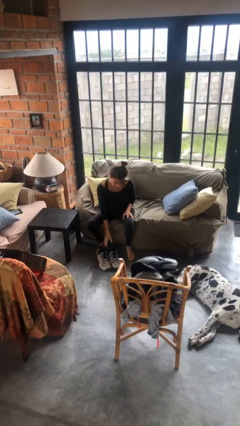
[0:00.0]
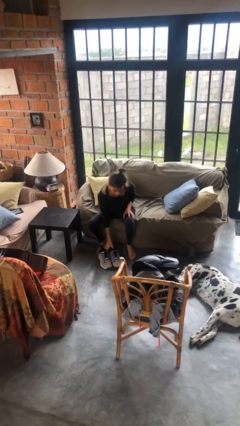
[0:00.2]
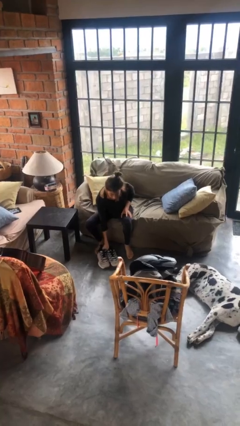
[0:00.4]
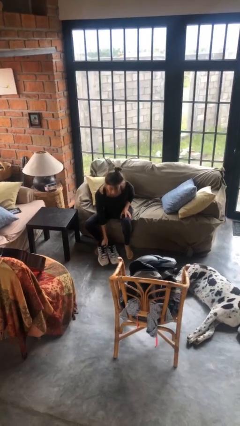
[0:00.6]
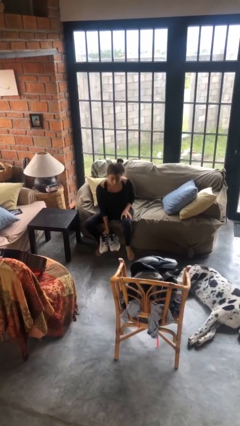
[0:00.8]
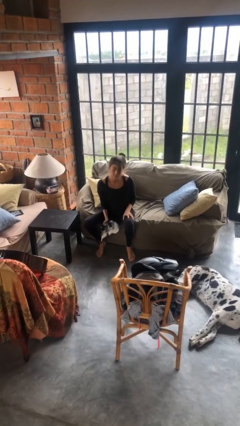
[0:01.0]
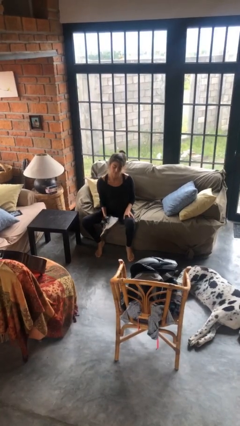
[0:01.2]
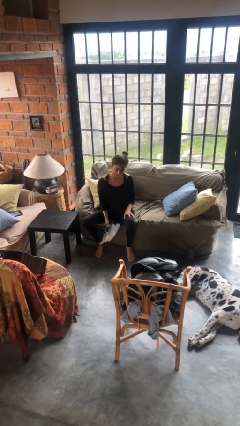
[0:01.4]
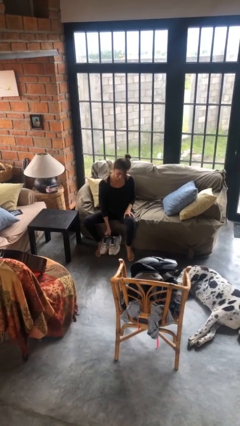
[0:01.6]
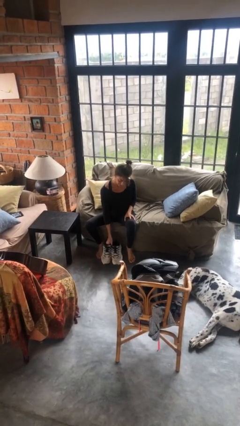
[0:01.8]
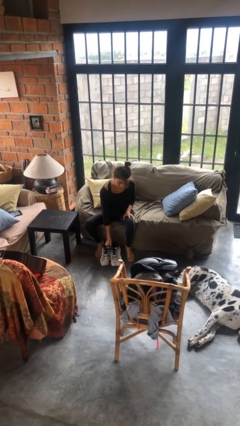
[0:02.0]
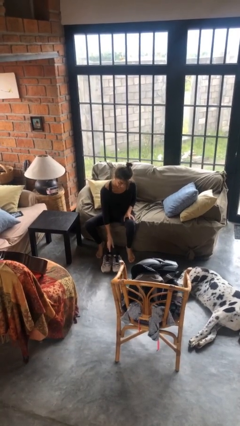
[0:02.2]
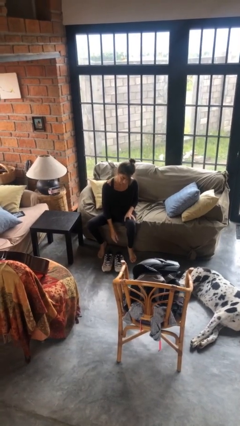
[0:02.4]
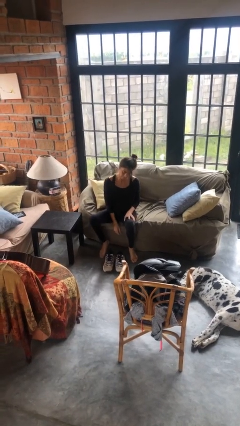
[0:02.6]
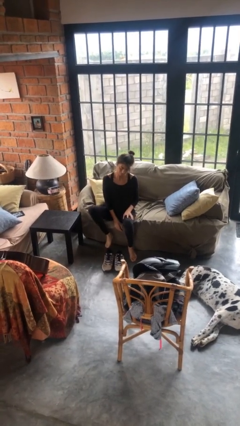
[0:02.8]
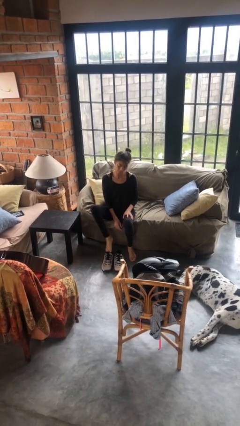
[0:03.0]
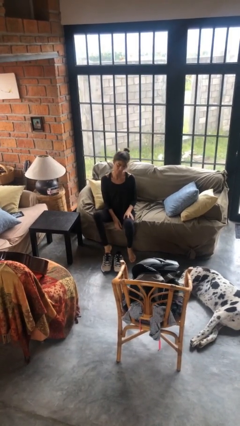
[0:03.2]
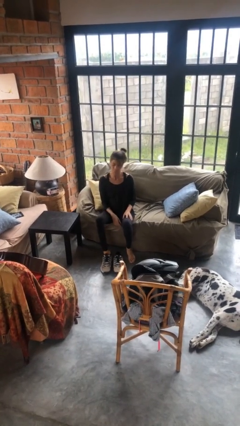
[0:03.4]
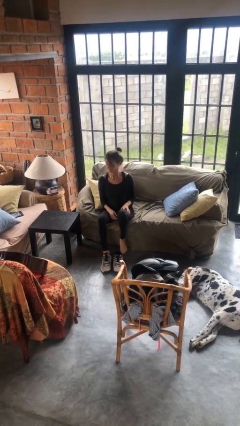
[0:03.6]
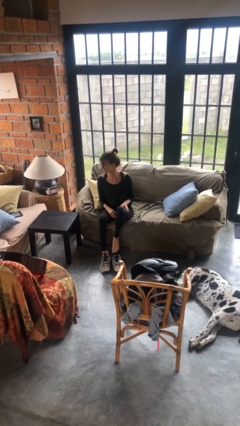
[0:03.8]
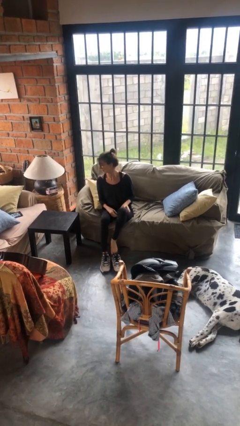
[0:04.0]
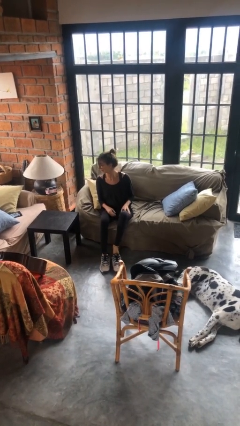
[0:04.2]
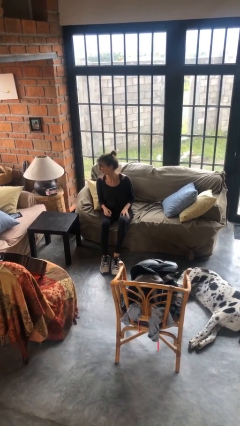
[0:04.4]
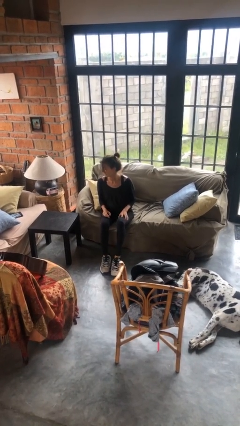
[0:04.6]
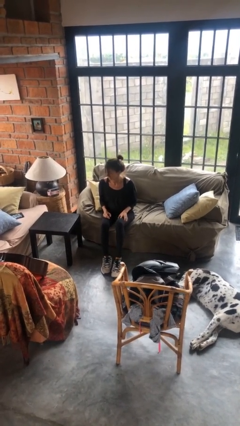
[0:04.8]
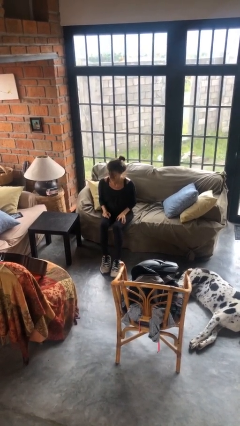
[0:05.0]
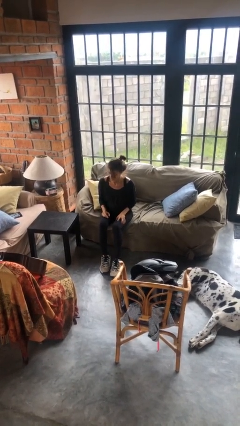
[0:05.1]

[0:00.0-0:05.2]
person puts on shoes

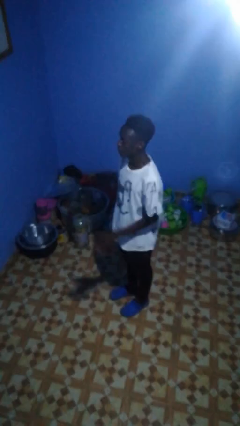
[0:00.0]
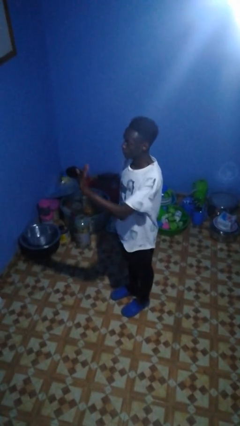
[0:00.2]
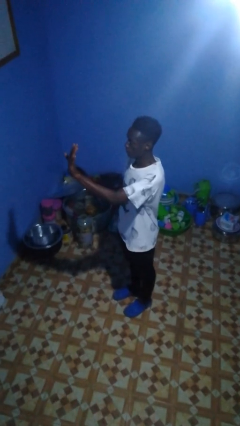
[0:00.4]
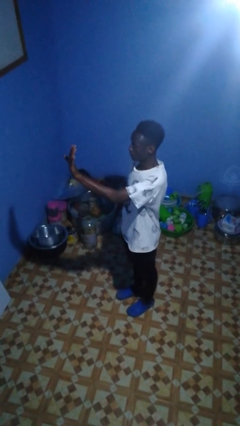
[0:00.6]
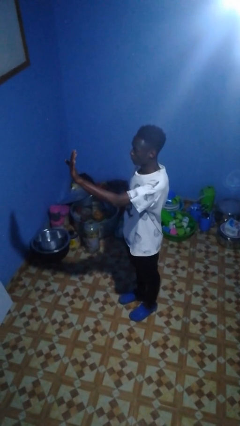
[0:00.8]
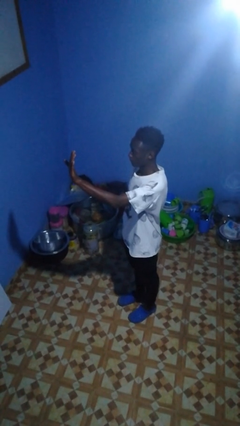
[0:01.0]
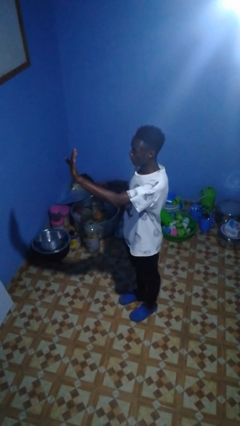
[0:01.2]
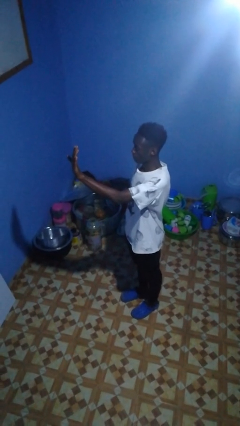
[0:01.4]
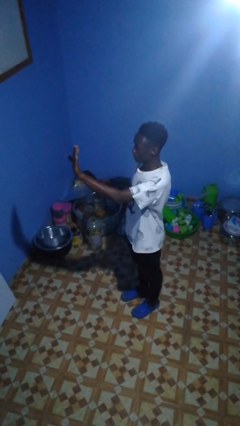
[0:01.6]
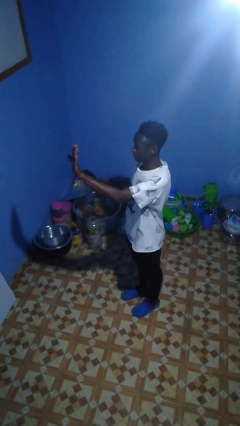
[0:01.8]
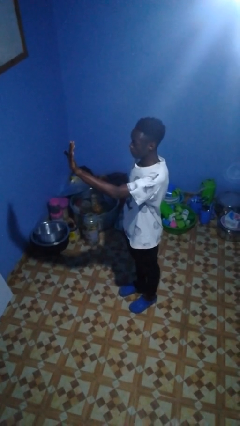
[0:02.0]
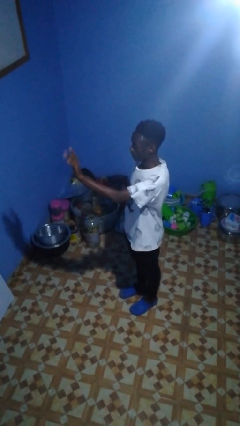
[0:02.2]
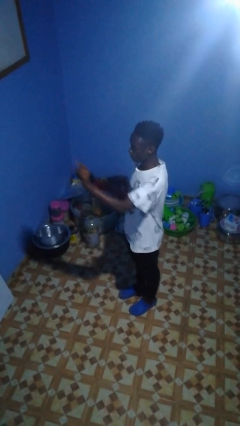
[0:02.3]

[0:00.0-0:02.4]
person gestures number five

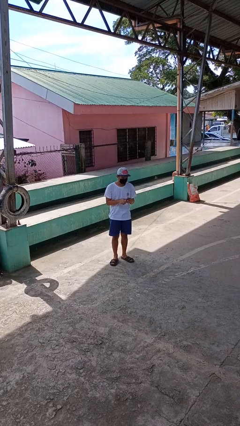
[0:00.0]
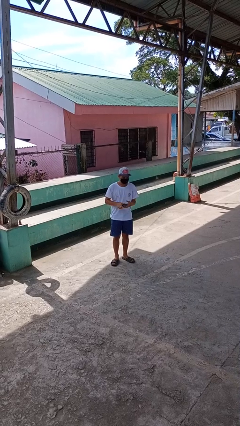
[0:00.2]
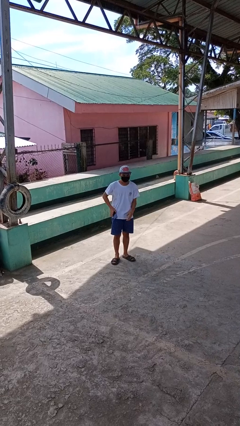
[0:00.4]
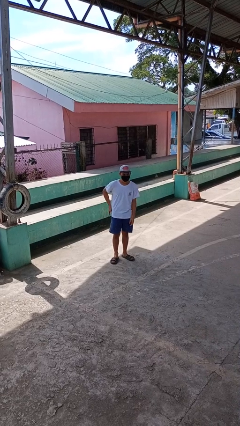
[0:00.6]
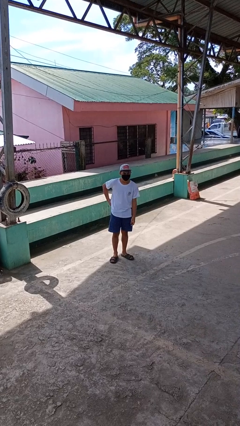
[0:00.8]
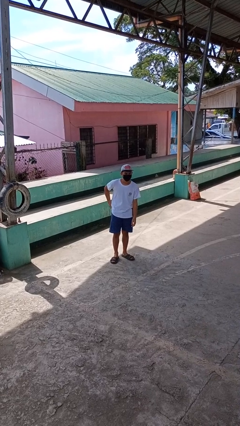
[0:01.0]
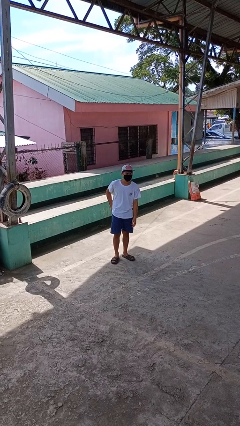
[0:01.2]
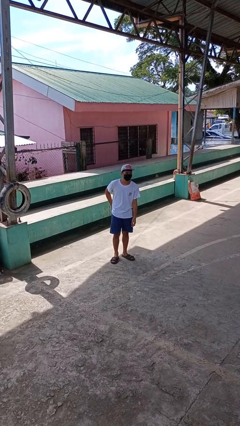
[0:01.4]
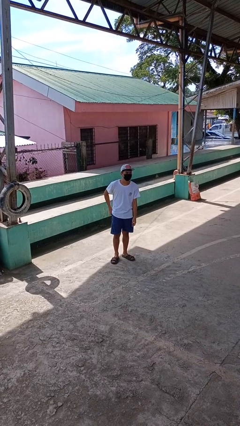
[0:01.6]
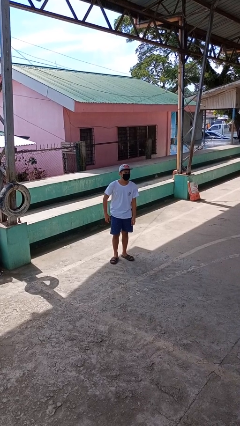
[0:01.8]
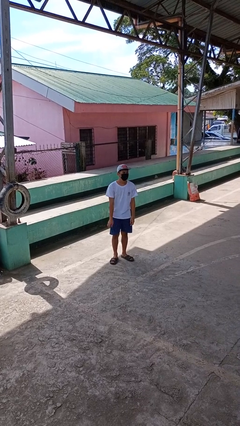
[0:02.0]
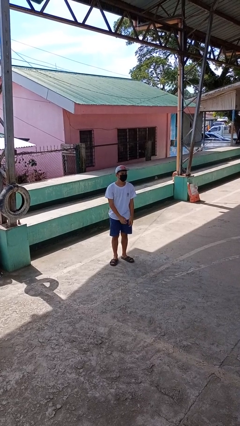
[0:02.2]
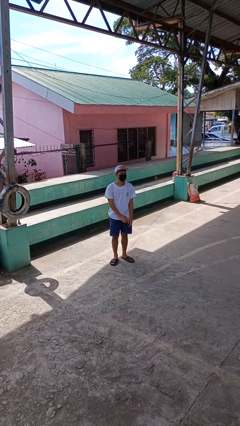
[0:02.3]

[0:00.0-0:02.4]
person puts phone into pocket

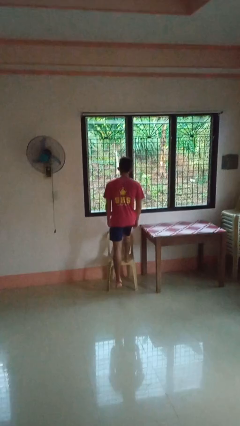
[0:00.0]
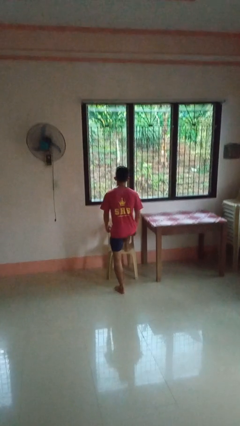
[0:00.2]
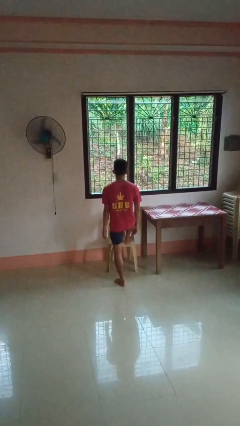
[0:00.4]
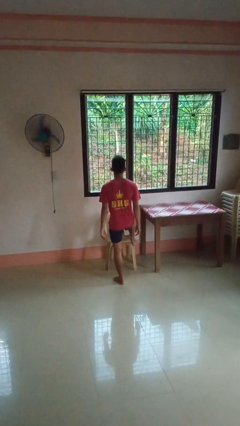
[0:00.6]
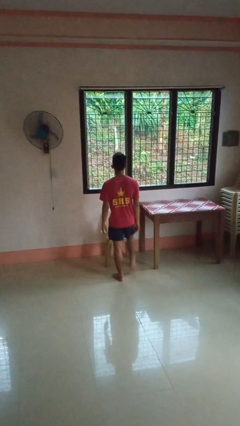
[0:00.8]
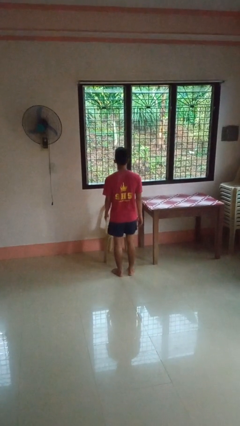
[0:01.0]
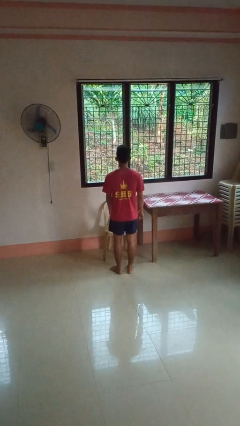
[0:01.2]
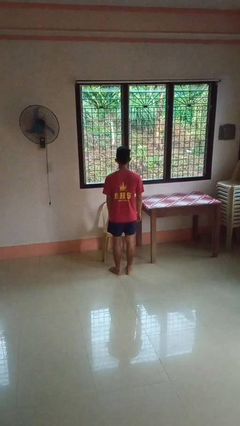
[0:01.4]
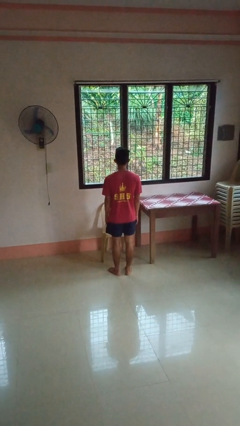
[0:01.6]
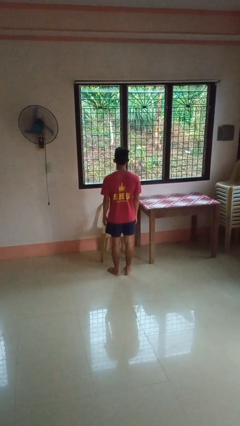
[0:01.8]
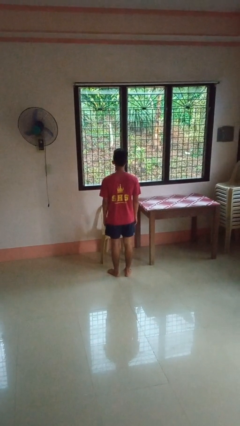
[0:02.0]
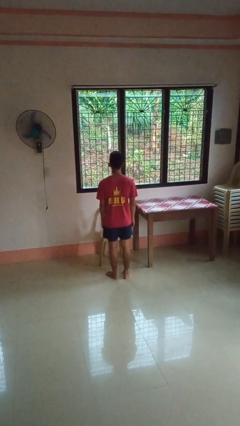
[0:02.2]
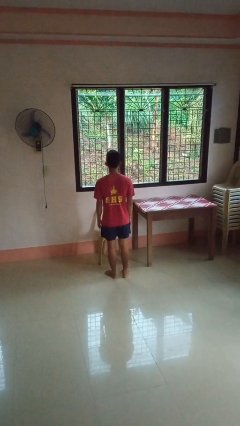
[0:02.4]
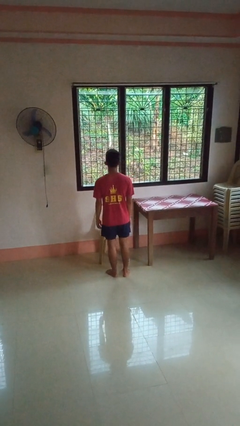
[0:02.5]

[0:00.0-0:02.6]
person climbs off chair

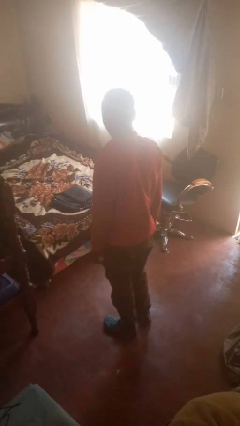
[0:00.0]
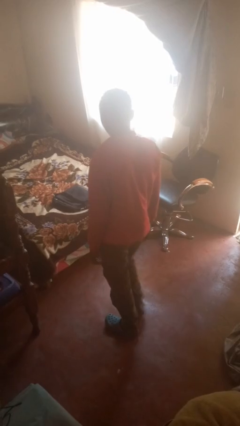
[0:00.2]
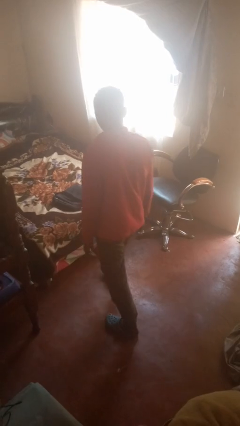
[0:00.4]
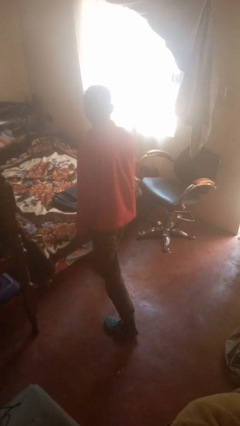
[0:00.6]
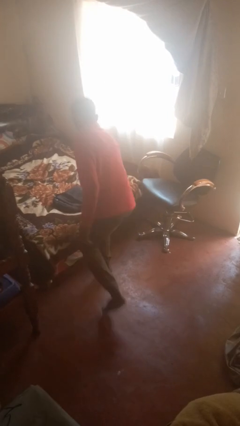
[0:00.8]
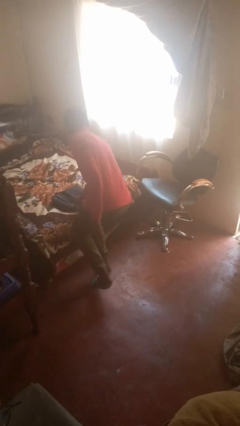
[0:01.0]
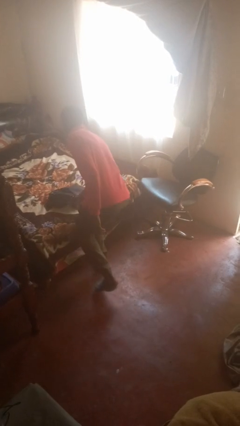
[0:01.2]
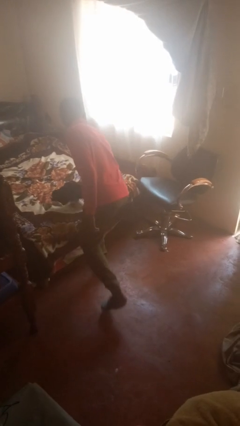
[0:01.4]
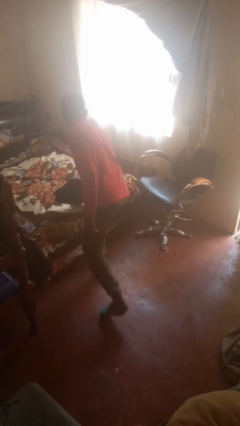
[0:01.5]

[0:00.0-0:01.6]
person picks up object from bed

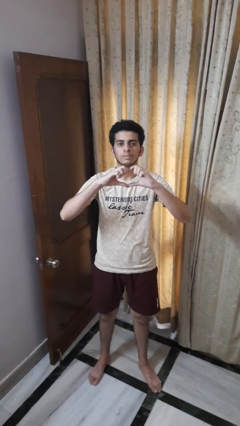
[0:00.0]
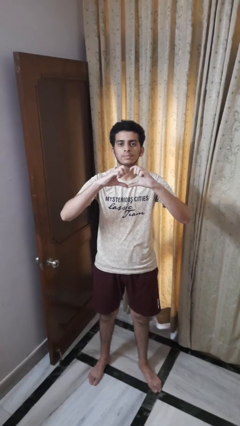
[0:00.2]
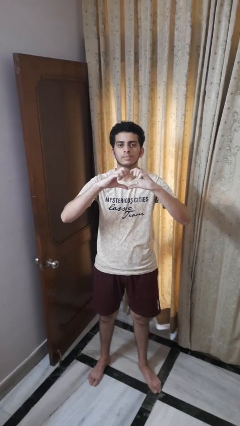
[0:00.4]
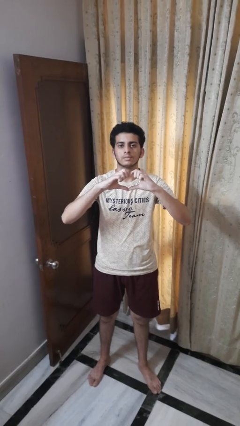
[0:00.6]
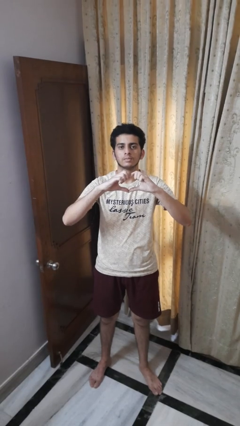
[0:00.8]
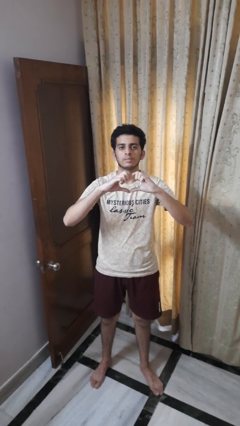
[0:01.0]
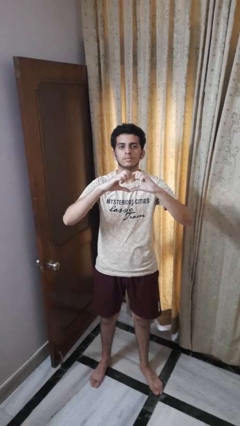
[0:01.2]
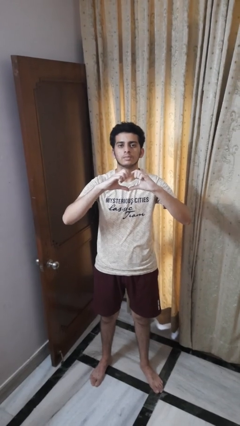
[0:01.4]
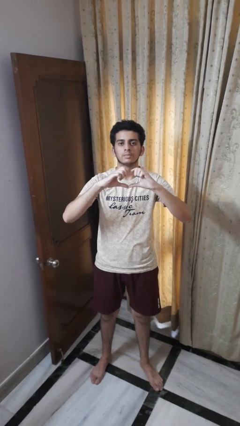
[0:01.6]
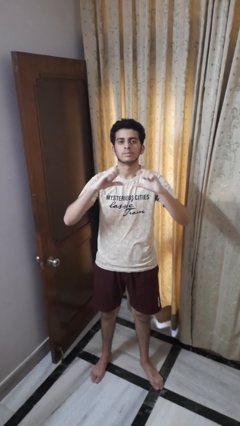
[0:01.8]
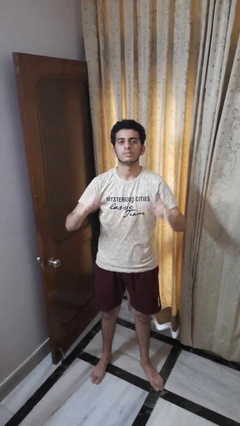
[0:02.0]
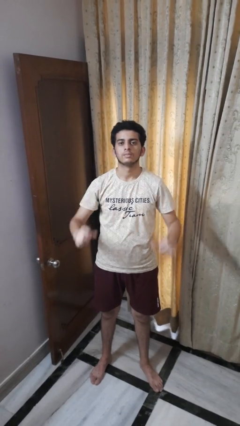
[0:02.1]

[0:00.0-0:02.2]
person gestures heart

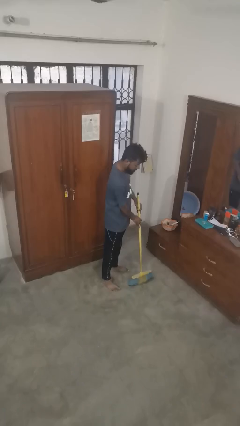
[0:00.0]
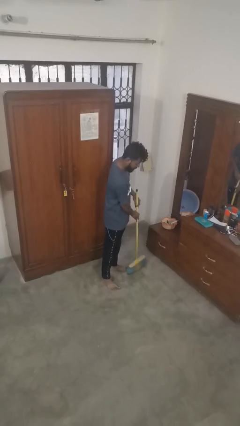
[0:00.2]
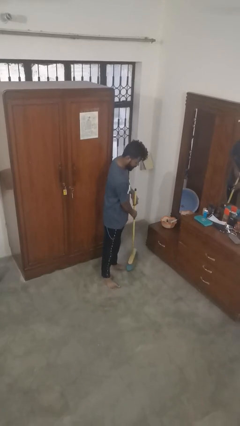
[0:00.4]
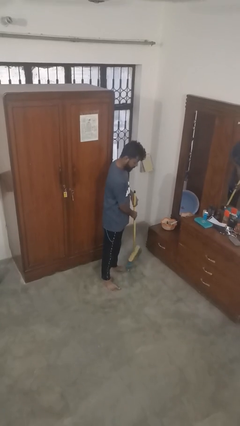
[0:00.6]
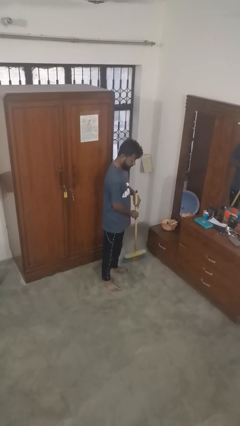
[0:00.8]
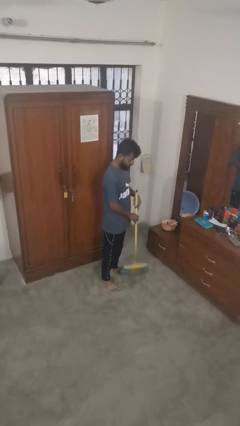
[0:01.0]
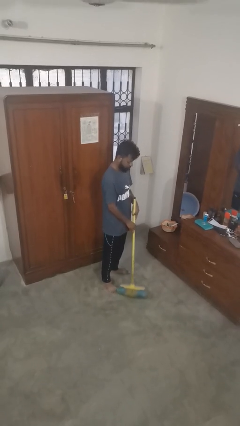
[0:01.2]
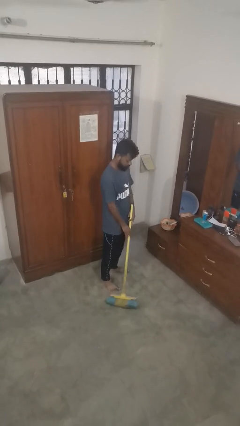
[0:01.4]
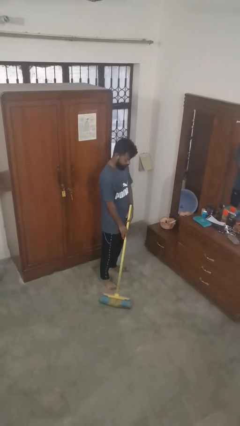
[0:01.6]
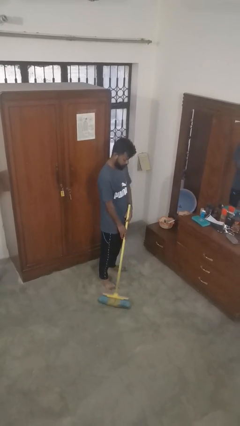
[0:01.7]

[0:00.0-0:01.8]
person sweeps floor
